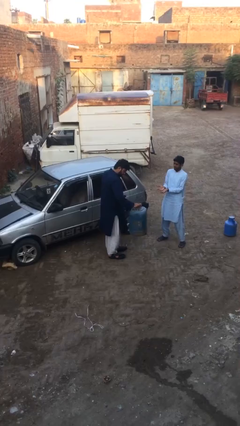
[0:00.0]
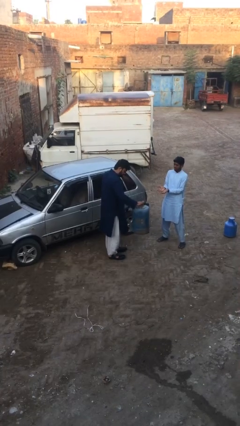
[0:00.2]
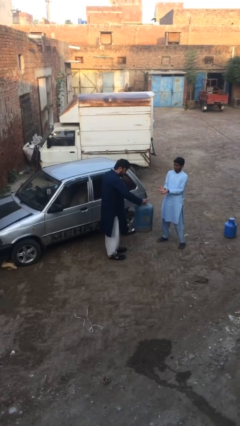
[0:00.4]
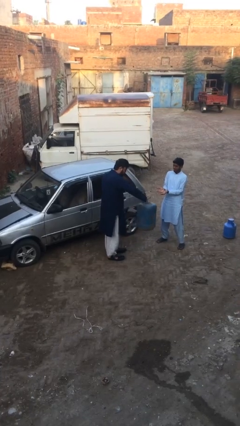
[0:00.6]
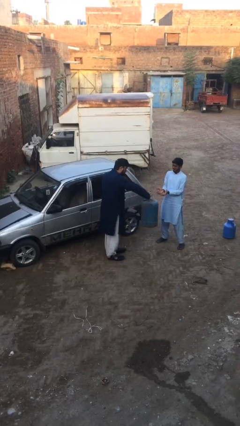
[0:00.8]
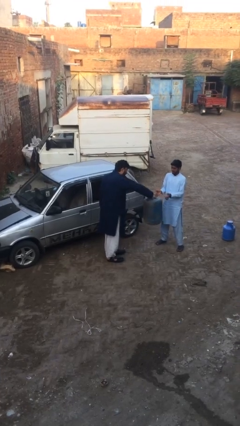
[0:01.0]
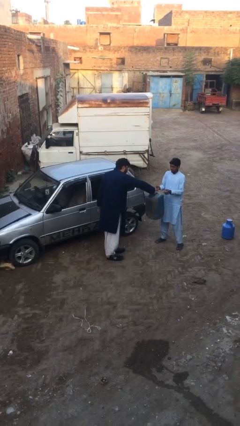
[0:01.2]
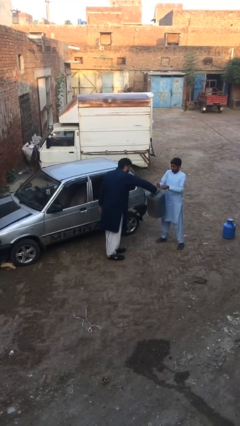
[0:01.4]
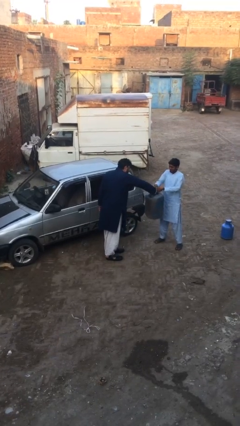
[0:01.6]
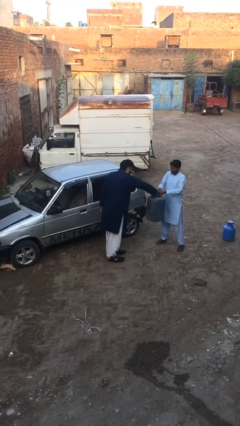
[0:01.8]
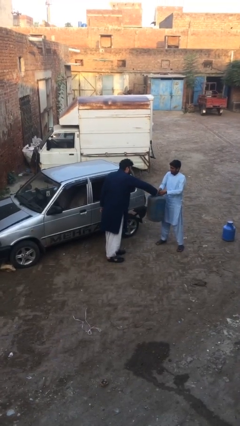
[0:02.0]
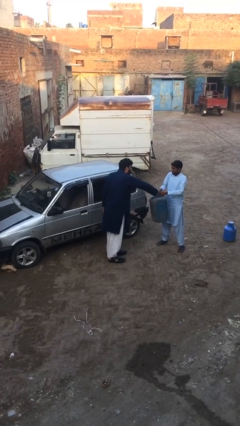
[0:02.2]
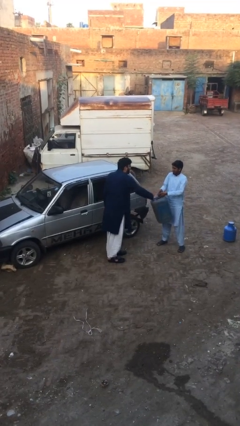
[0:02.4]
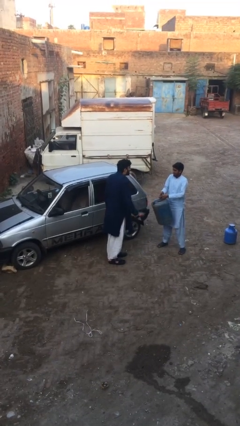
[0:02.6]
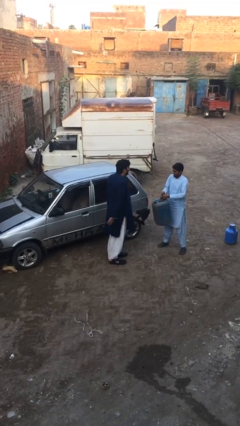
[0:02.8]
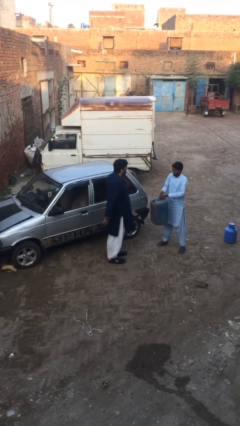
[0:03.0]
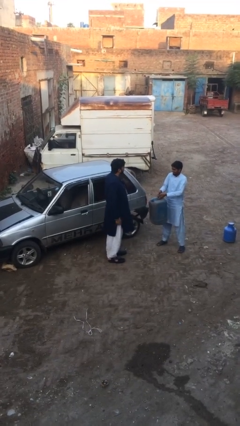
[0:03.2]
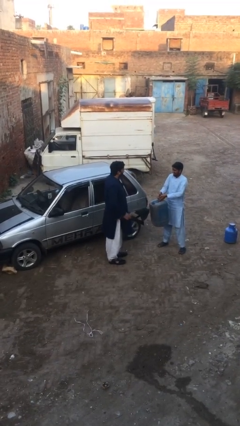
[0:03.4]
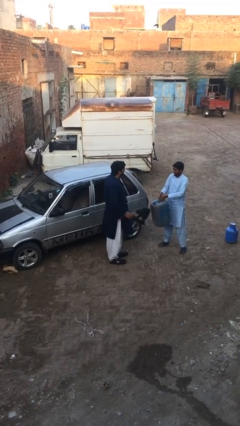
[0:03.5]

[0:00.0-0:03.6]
person transfers object to person

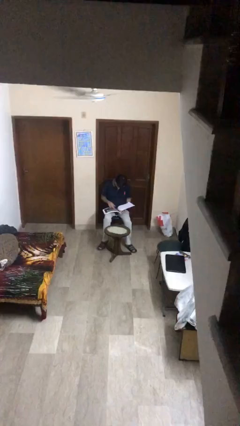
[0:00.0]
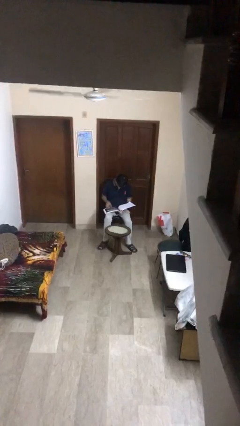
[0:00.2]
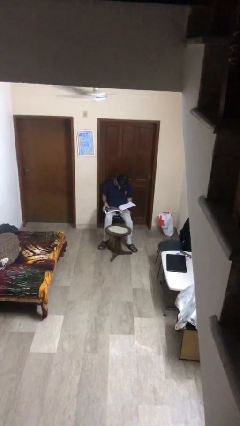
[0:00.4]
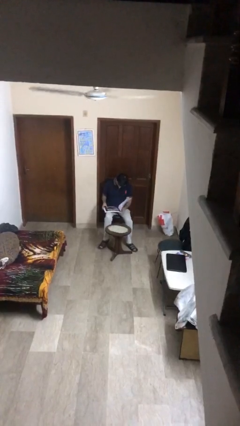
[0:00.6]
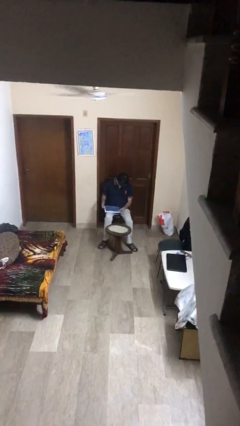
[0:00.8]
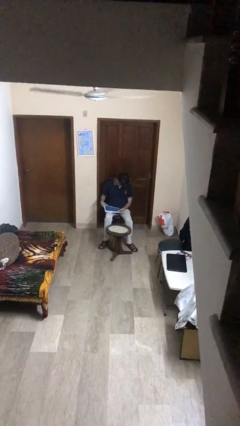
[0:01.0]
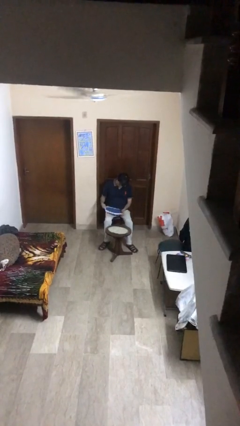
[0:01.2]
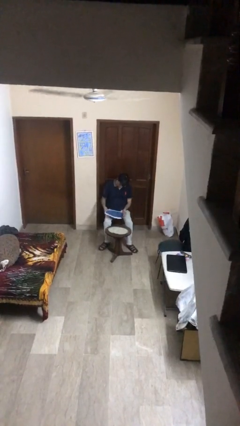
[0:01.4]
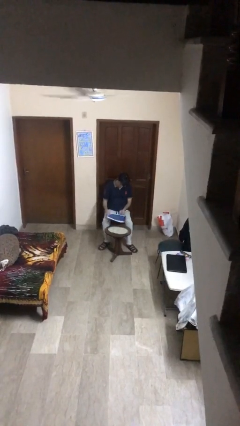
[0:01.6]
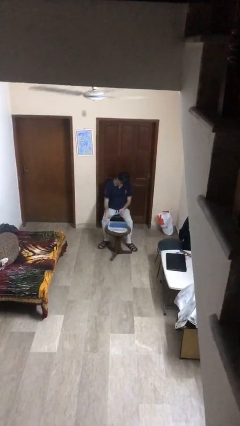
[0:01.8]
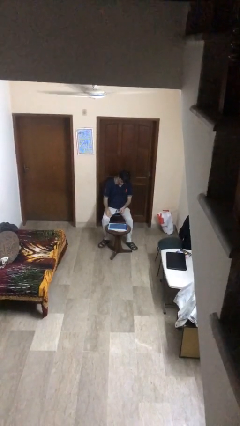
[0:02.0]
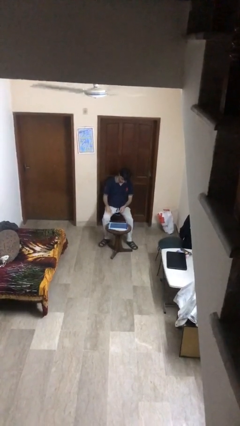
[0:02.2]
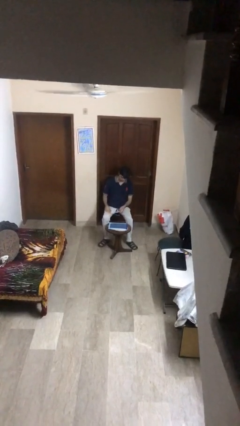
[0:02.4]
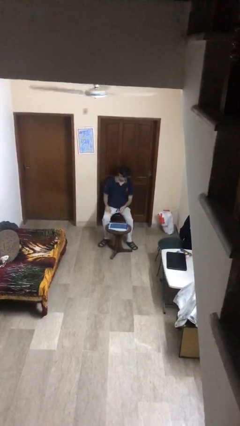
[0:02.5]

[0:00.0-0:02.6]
person puts down object on table

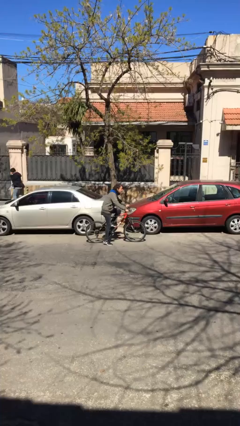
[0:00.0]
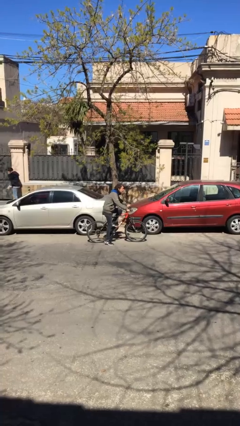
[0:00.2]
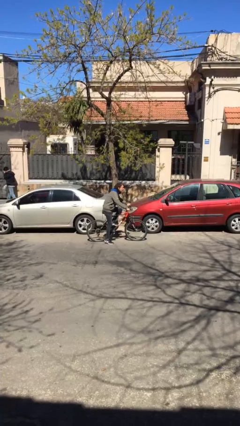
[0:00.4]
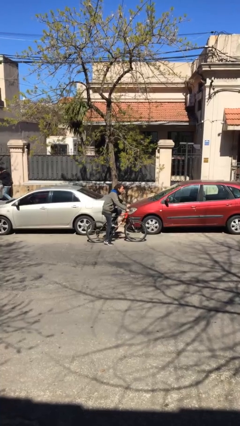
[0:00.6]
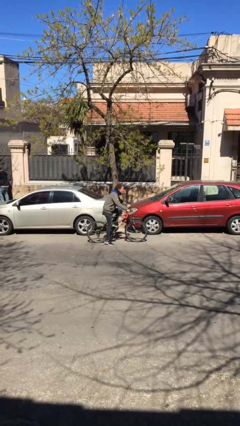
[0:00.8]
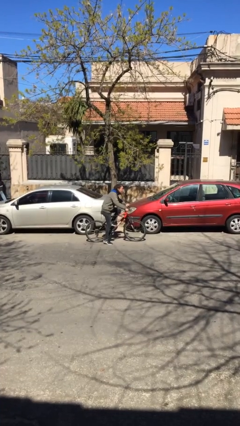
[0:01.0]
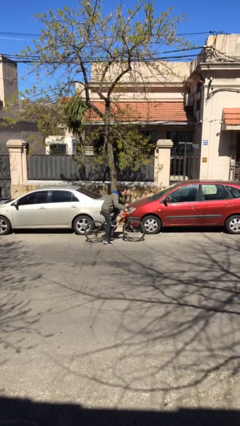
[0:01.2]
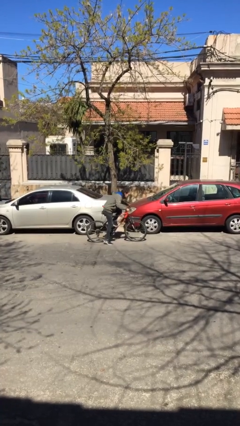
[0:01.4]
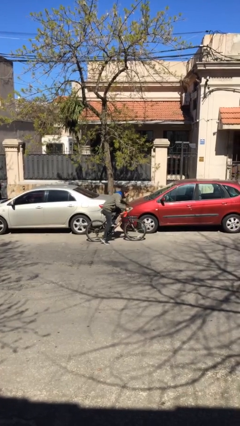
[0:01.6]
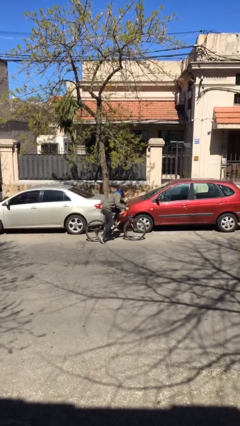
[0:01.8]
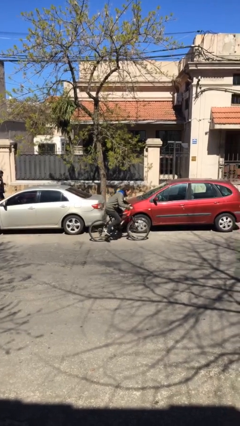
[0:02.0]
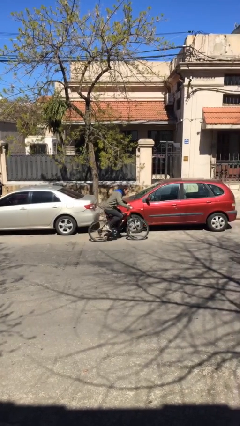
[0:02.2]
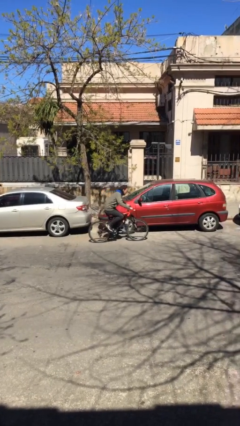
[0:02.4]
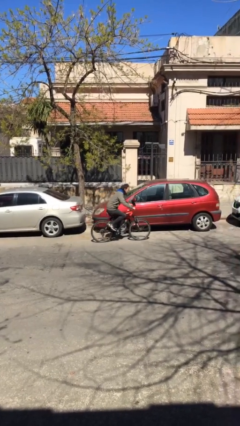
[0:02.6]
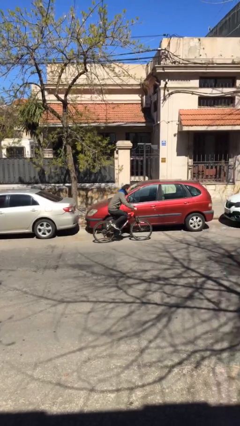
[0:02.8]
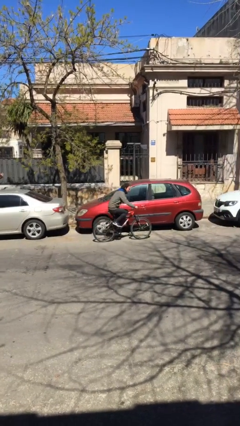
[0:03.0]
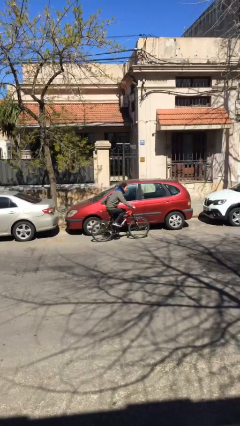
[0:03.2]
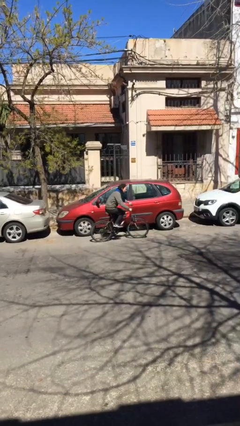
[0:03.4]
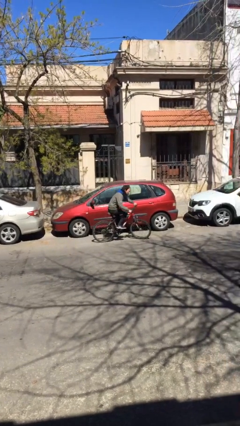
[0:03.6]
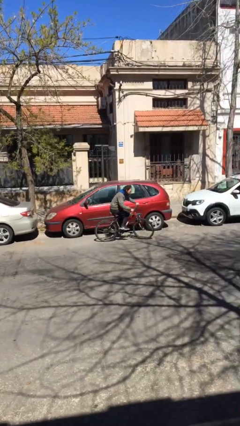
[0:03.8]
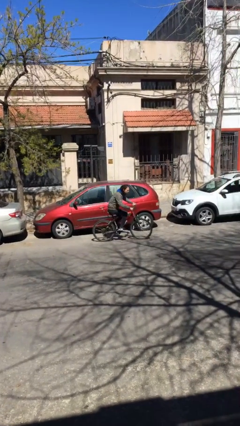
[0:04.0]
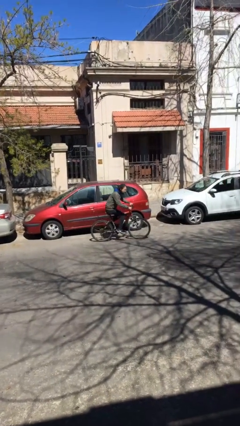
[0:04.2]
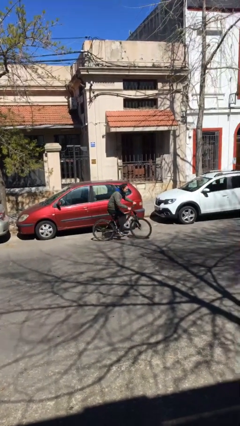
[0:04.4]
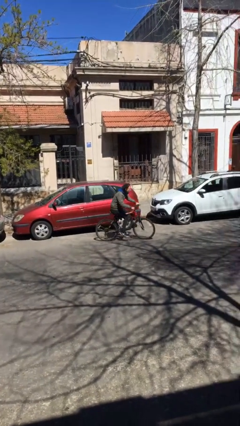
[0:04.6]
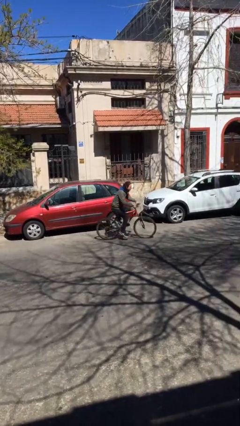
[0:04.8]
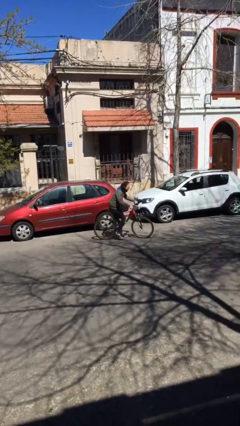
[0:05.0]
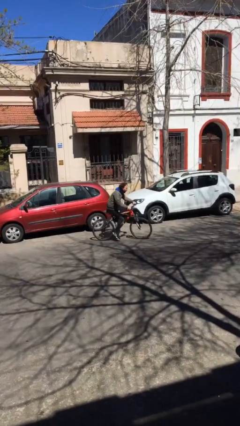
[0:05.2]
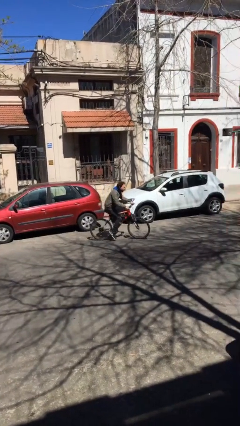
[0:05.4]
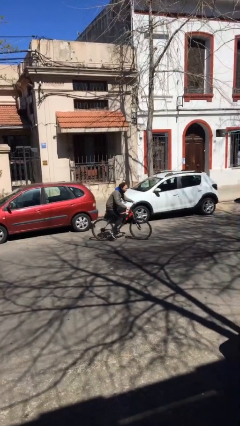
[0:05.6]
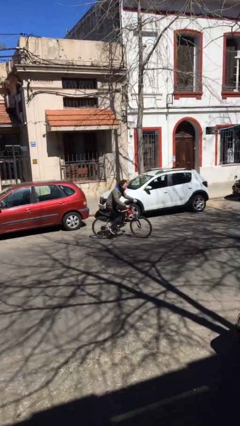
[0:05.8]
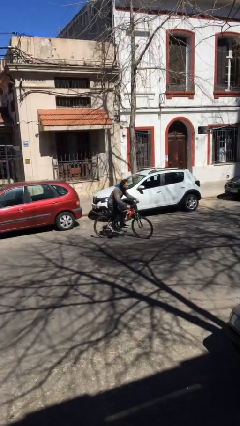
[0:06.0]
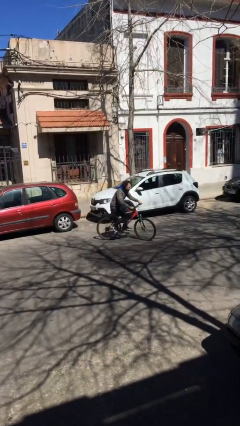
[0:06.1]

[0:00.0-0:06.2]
person rides bicycle

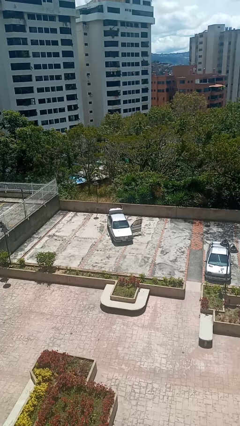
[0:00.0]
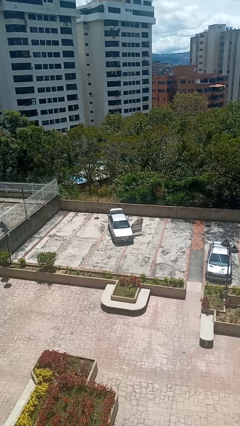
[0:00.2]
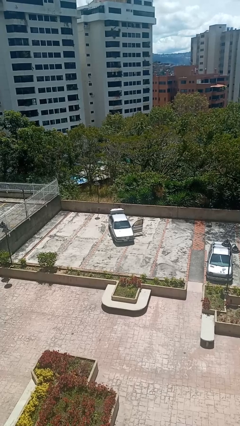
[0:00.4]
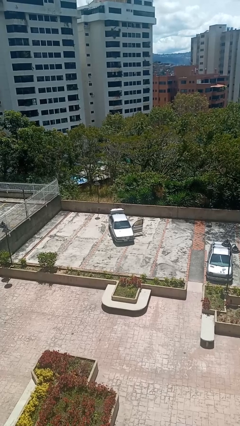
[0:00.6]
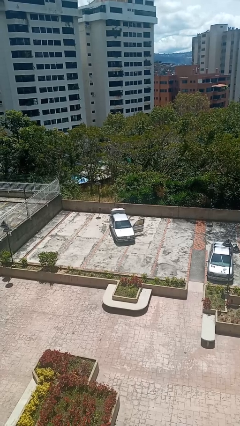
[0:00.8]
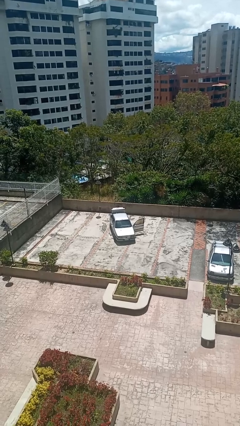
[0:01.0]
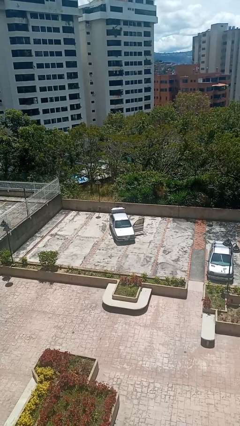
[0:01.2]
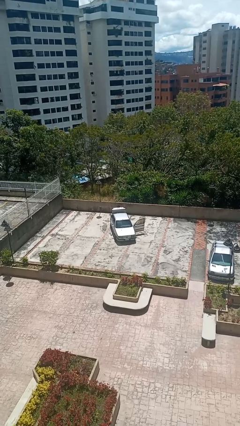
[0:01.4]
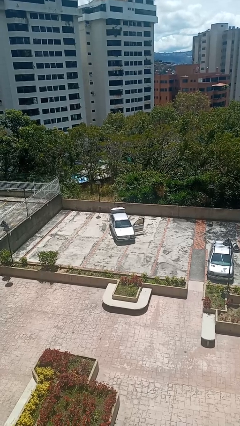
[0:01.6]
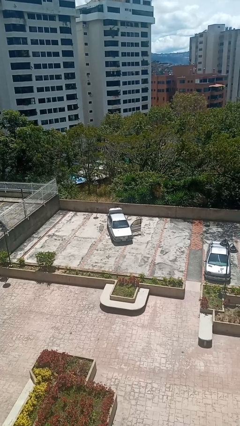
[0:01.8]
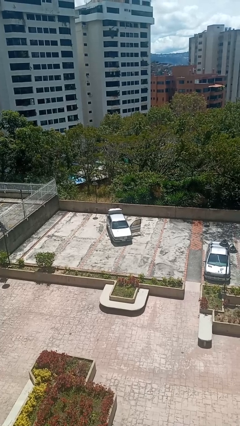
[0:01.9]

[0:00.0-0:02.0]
person loads car

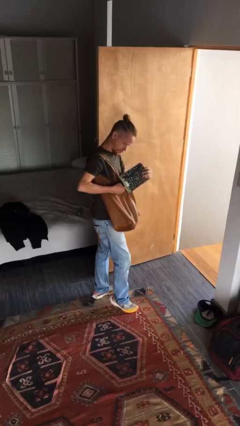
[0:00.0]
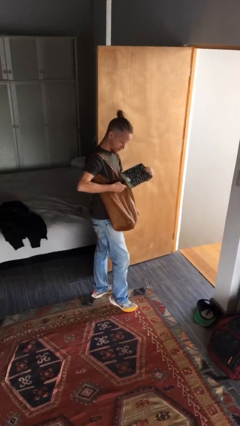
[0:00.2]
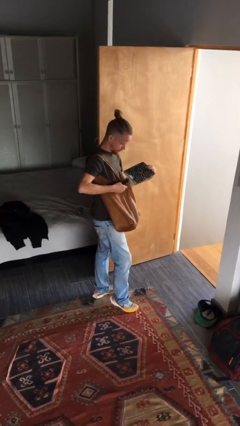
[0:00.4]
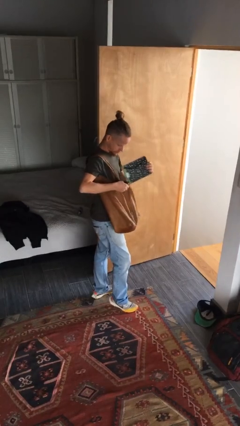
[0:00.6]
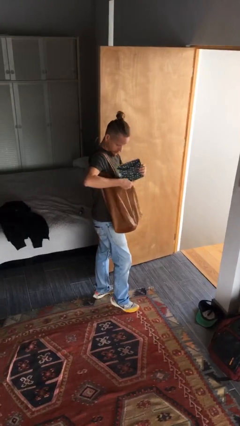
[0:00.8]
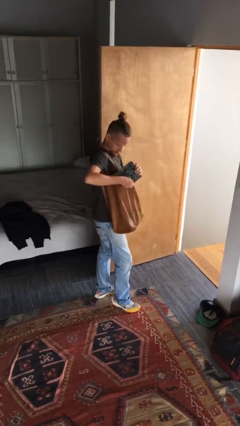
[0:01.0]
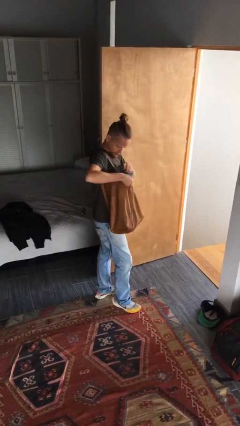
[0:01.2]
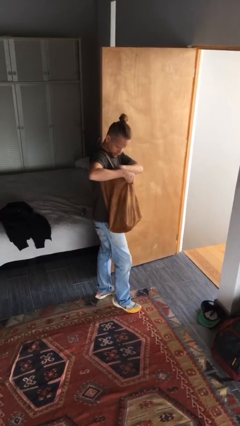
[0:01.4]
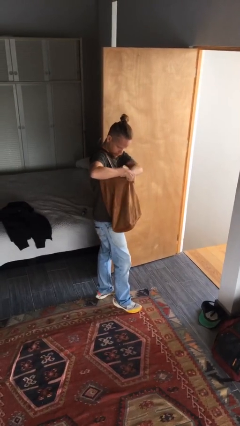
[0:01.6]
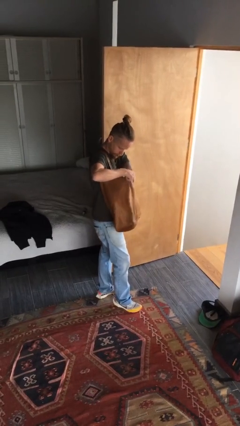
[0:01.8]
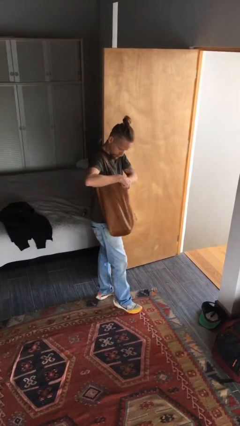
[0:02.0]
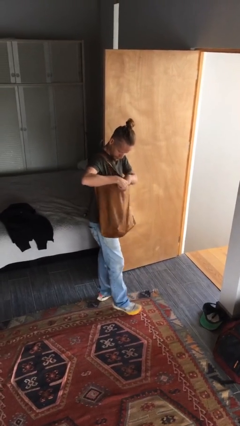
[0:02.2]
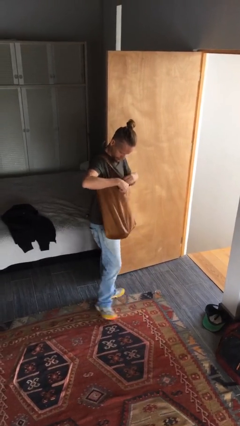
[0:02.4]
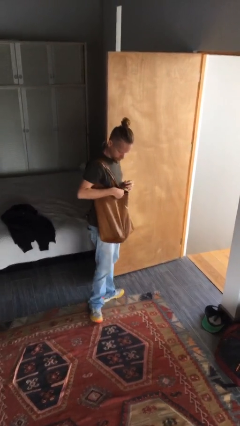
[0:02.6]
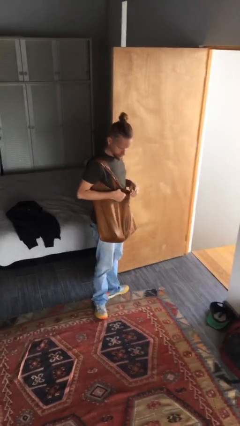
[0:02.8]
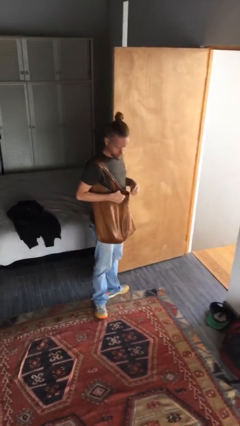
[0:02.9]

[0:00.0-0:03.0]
person puts object into purse

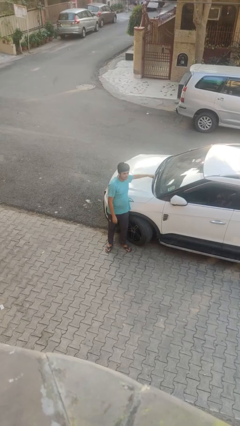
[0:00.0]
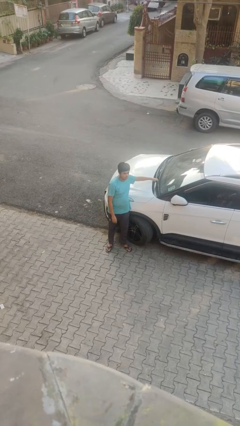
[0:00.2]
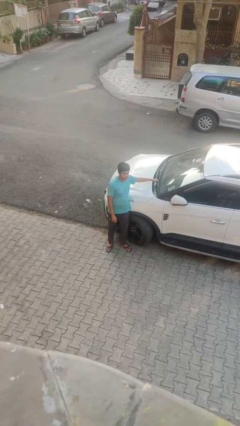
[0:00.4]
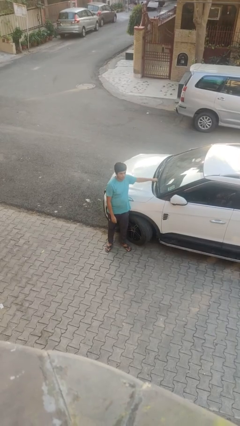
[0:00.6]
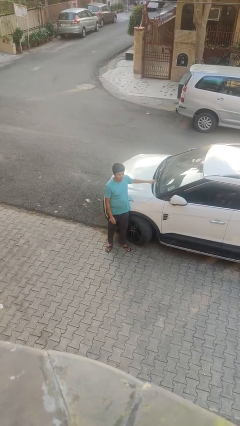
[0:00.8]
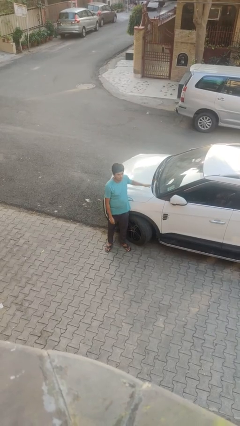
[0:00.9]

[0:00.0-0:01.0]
person flips down car wipers
